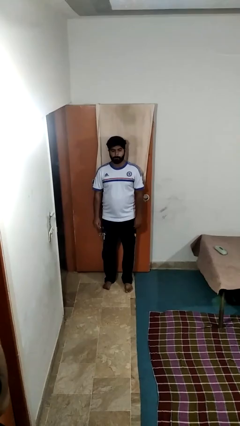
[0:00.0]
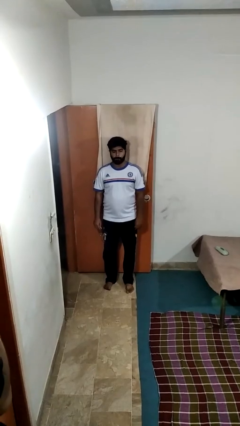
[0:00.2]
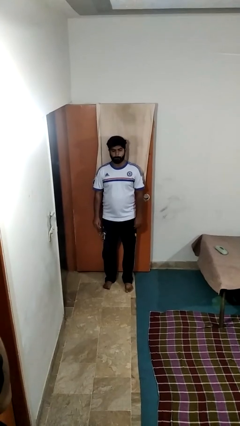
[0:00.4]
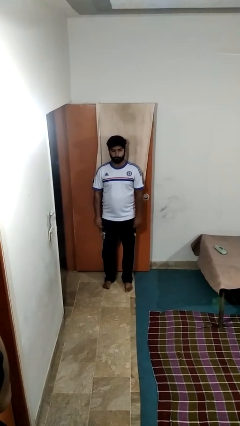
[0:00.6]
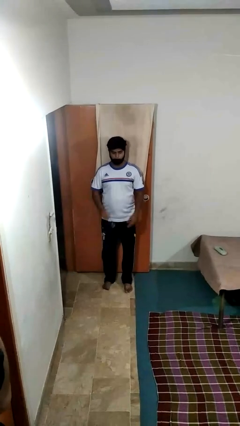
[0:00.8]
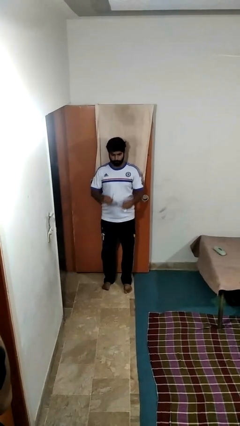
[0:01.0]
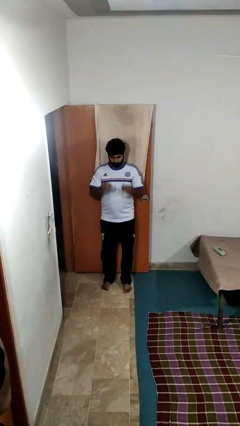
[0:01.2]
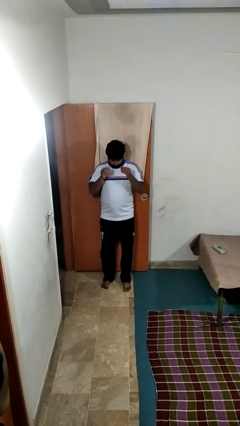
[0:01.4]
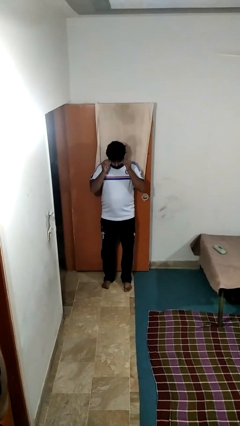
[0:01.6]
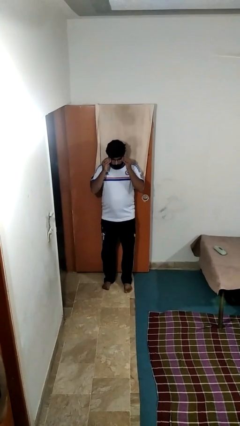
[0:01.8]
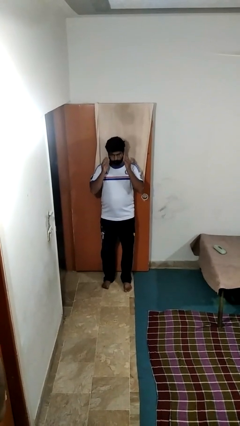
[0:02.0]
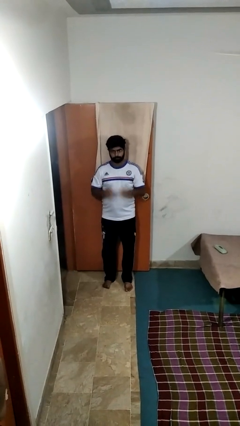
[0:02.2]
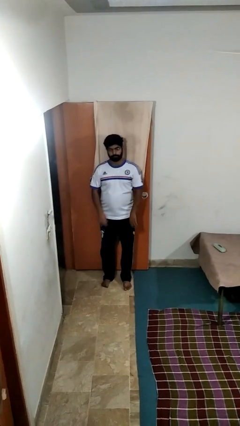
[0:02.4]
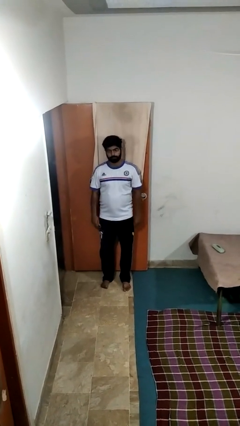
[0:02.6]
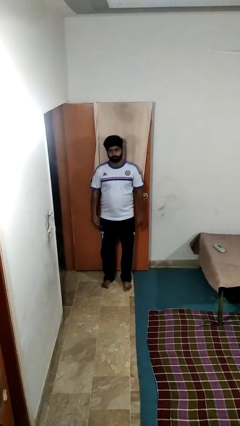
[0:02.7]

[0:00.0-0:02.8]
person puts on glasses

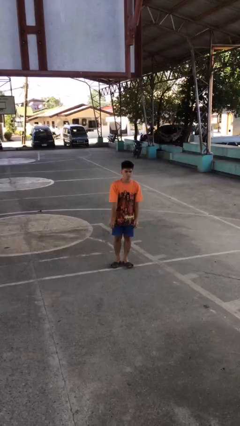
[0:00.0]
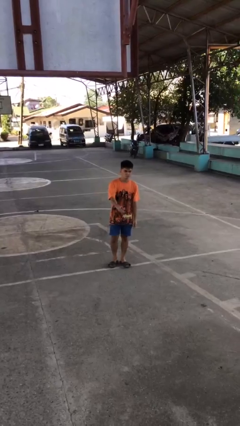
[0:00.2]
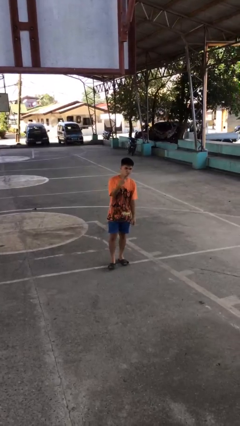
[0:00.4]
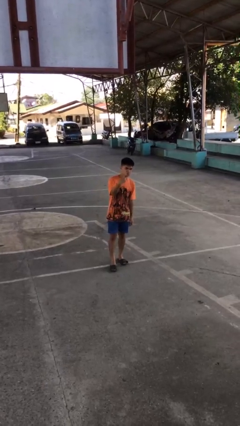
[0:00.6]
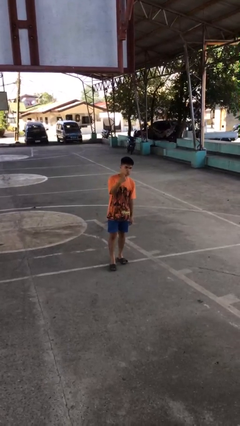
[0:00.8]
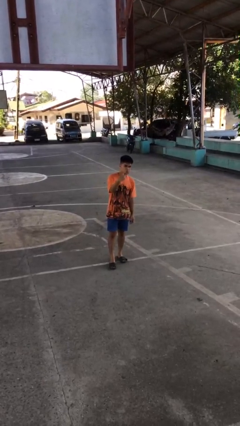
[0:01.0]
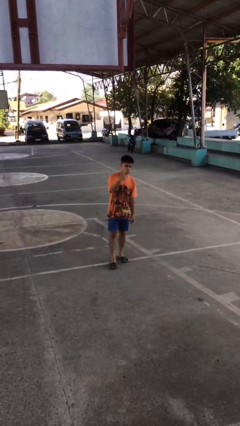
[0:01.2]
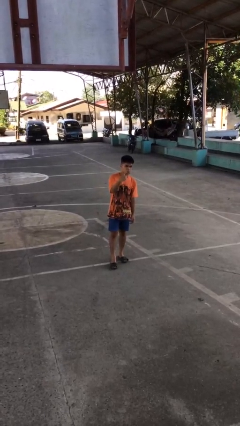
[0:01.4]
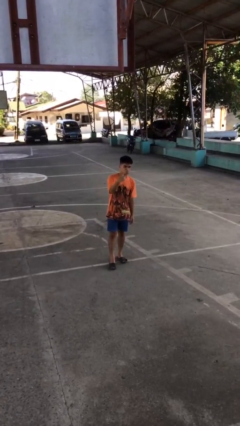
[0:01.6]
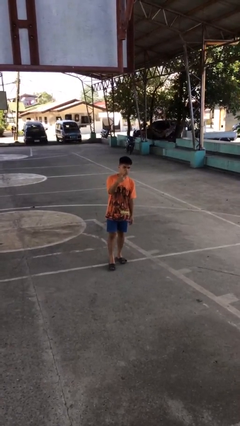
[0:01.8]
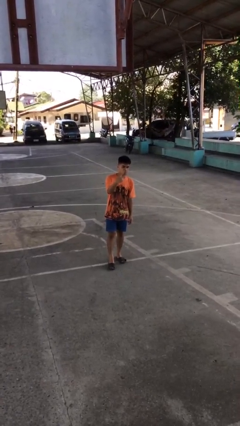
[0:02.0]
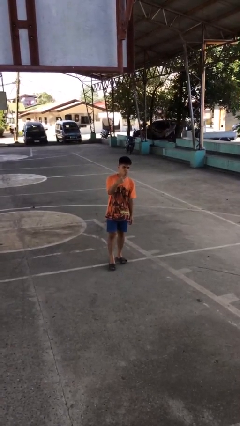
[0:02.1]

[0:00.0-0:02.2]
person gestures peace

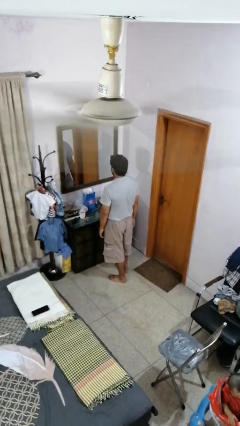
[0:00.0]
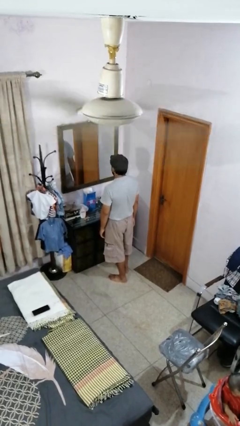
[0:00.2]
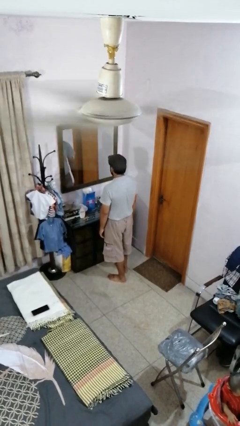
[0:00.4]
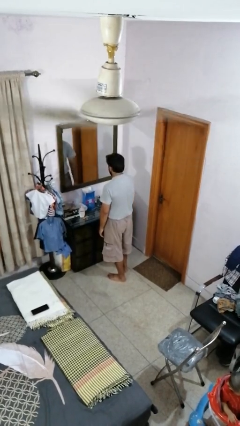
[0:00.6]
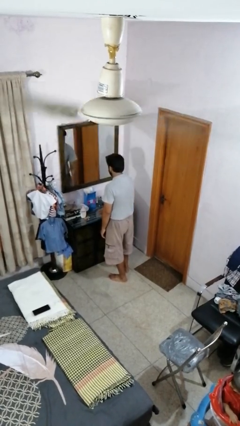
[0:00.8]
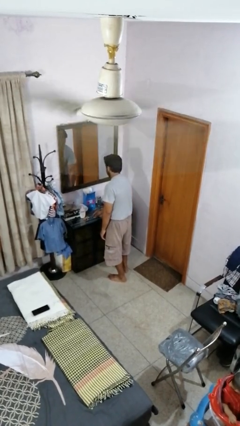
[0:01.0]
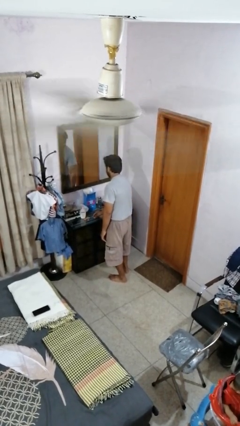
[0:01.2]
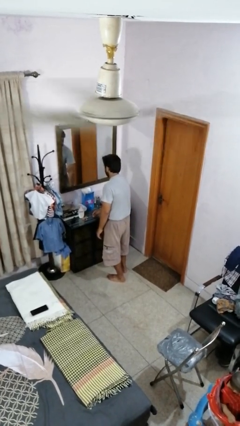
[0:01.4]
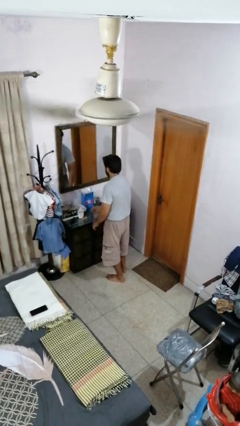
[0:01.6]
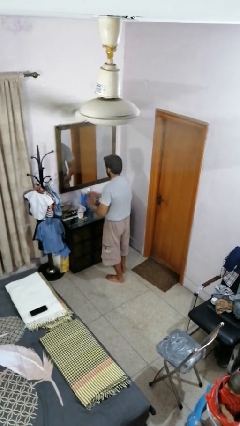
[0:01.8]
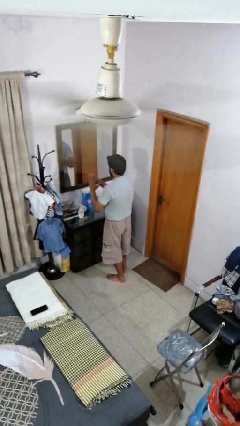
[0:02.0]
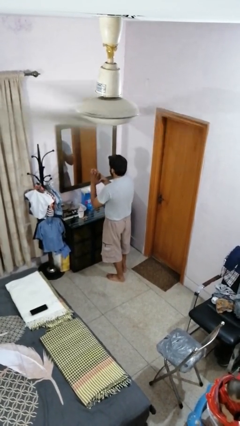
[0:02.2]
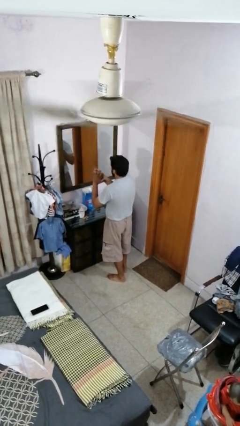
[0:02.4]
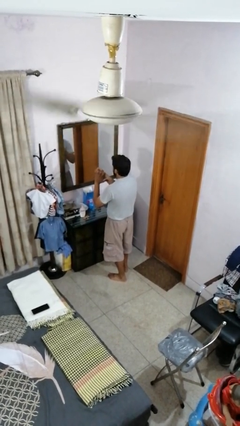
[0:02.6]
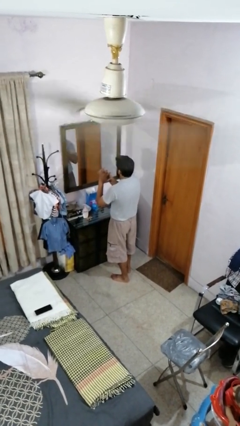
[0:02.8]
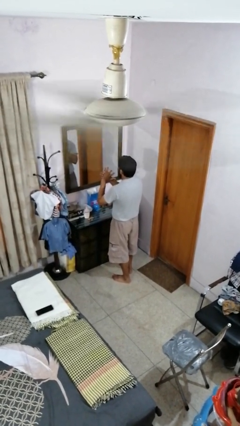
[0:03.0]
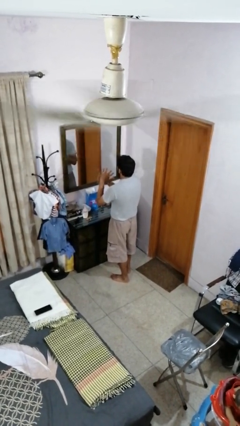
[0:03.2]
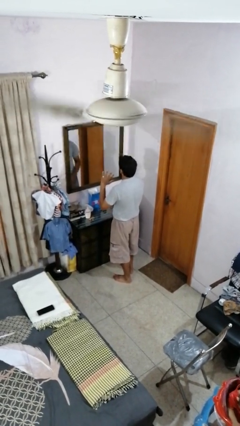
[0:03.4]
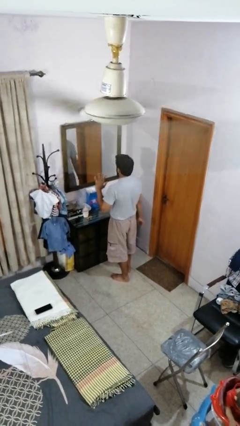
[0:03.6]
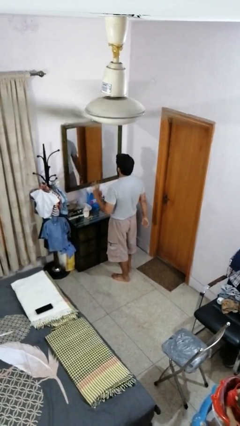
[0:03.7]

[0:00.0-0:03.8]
person puts on ring

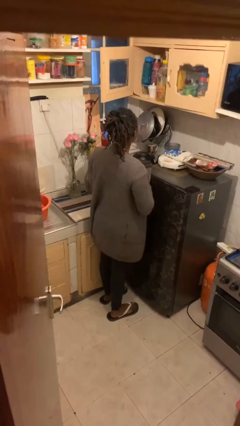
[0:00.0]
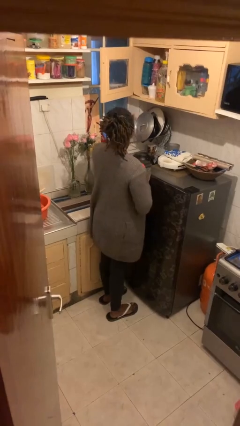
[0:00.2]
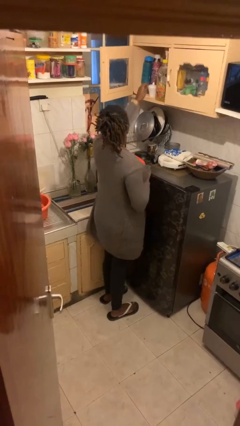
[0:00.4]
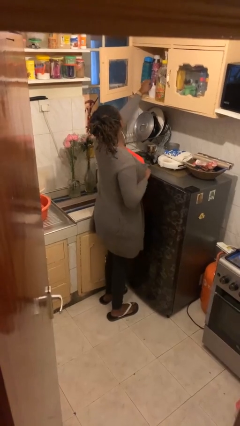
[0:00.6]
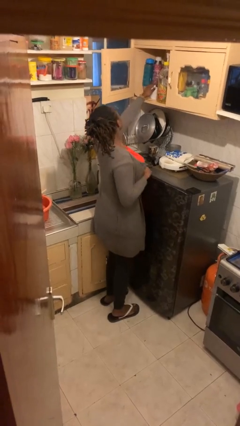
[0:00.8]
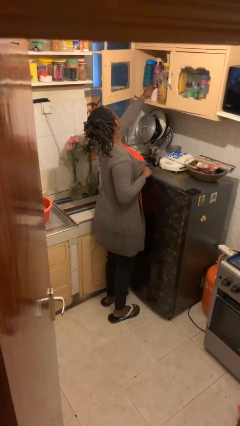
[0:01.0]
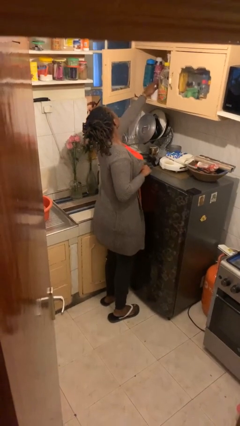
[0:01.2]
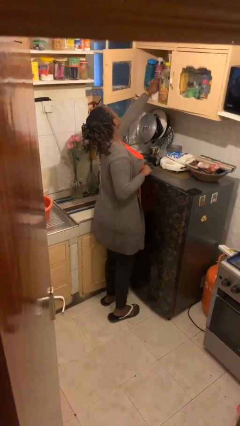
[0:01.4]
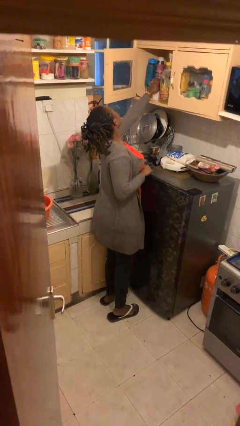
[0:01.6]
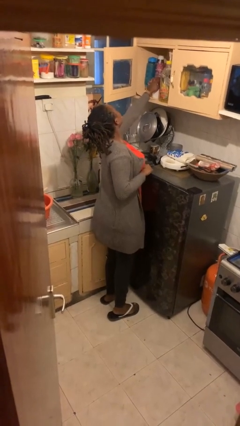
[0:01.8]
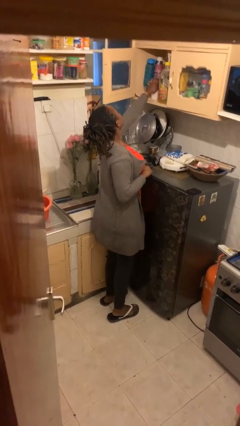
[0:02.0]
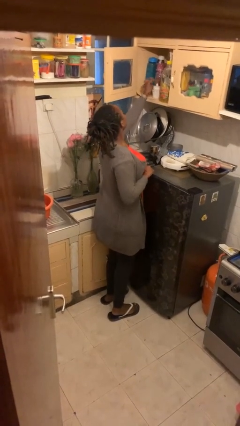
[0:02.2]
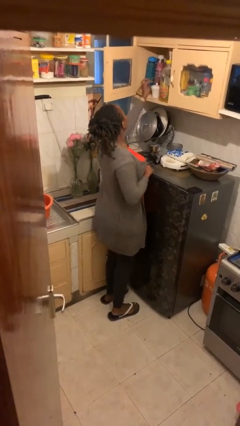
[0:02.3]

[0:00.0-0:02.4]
person searches in cabinet

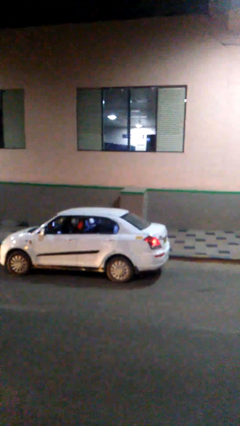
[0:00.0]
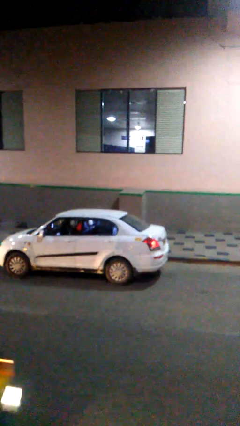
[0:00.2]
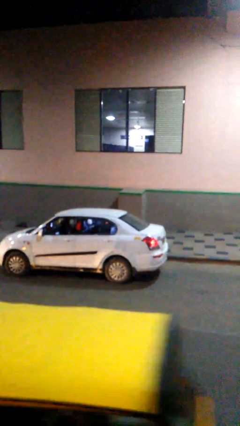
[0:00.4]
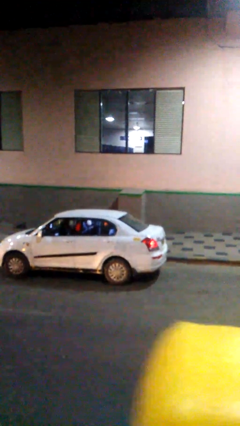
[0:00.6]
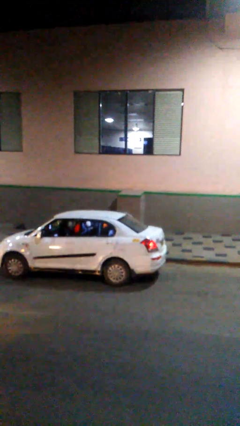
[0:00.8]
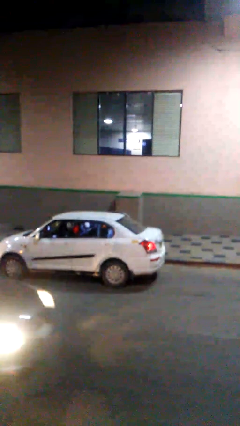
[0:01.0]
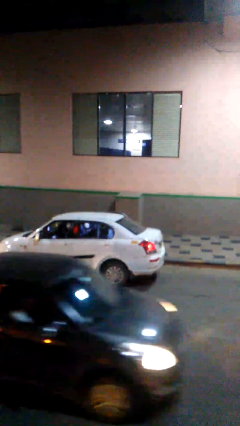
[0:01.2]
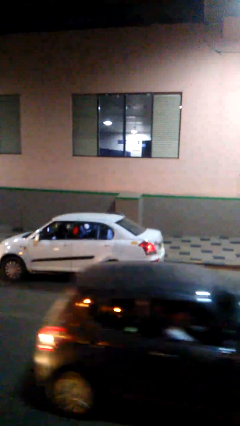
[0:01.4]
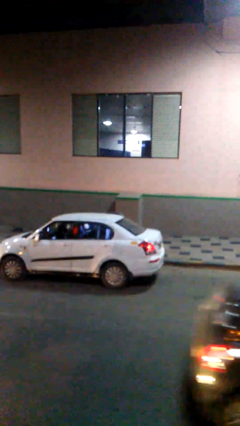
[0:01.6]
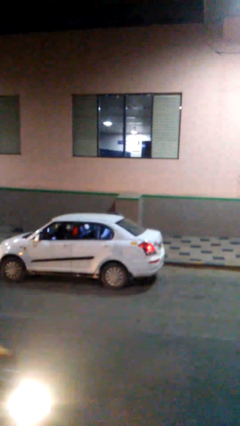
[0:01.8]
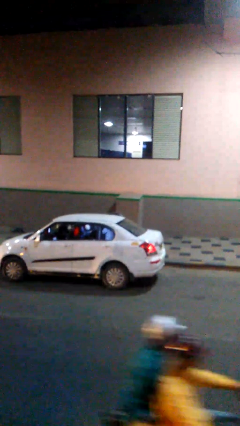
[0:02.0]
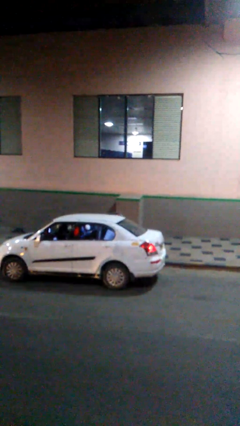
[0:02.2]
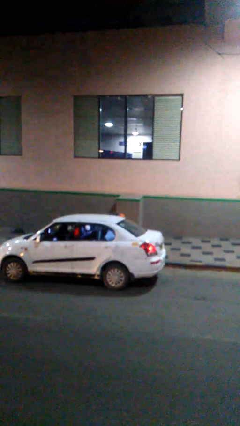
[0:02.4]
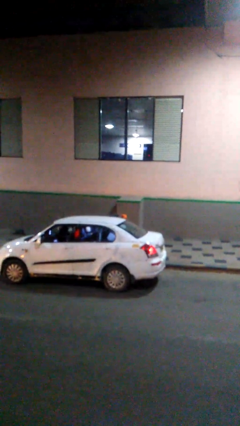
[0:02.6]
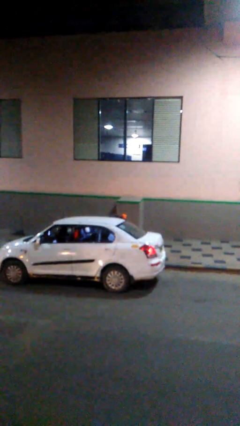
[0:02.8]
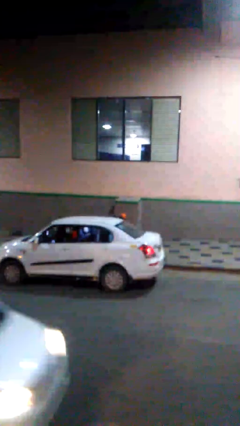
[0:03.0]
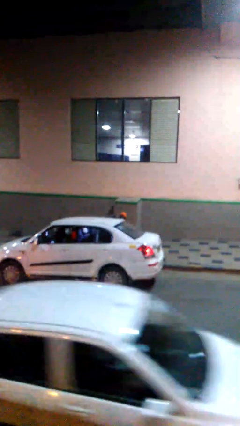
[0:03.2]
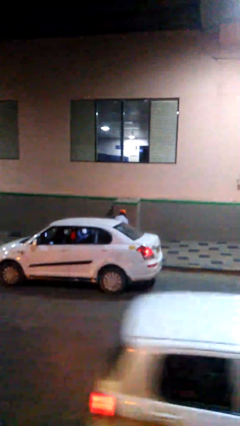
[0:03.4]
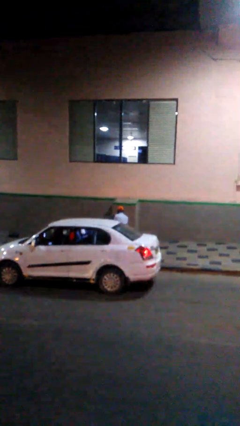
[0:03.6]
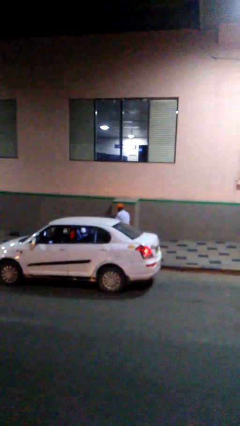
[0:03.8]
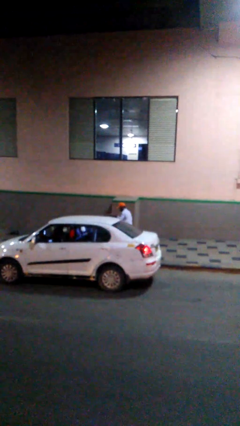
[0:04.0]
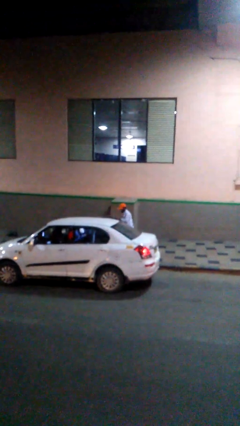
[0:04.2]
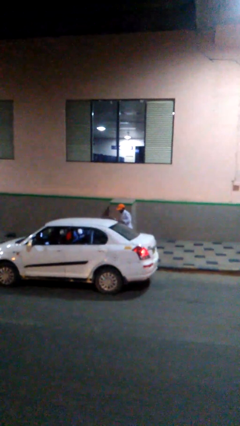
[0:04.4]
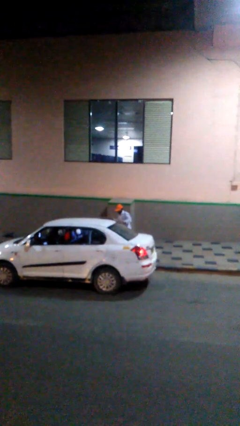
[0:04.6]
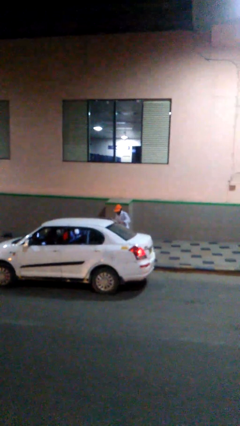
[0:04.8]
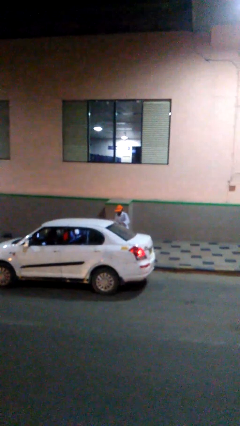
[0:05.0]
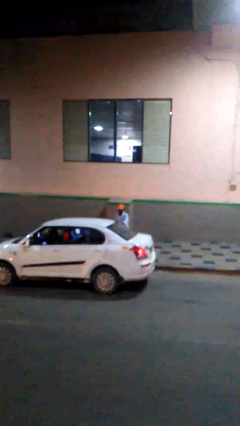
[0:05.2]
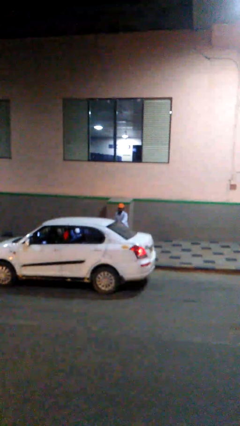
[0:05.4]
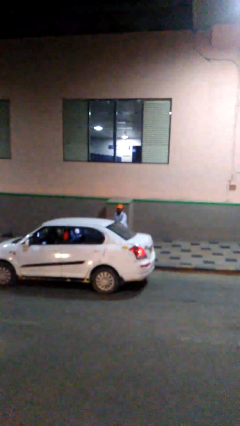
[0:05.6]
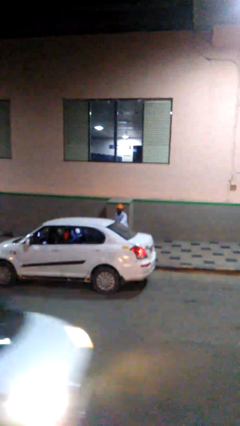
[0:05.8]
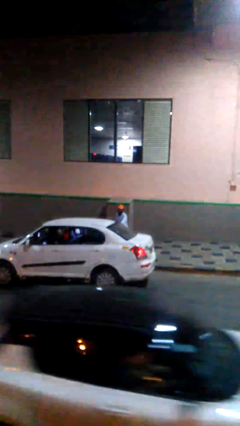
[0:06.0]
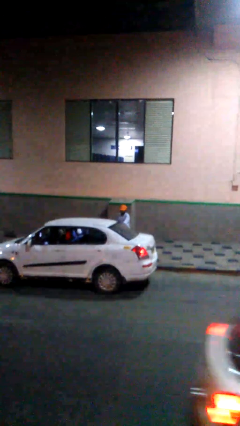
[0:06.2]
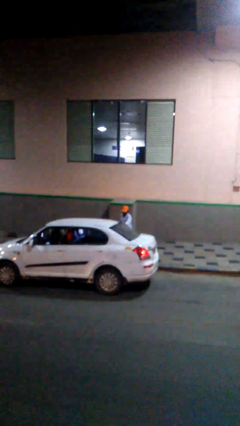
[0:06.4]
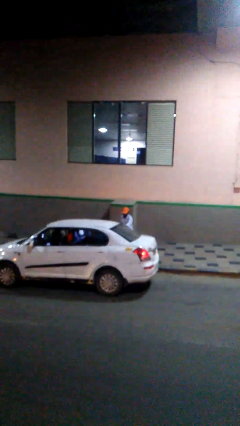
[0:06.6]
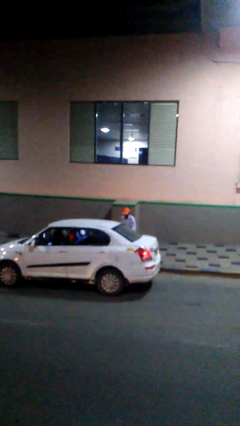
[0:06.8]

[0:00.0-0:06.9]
person exits car
